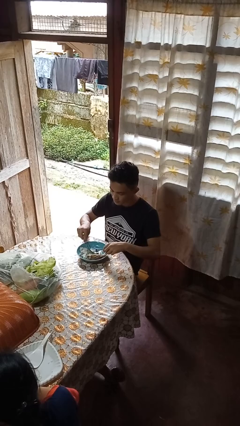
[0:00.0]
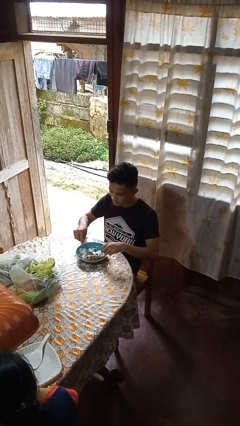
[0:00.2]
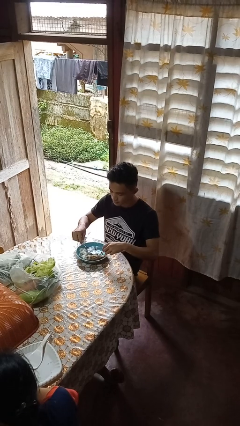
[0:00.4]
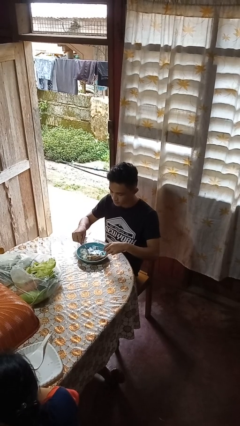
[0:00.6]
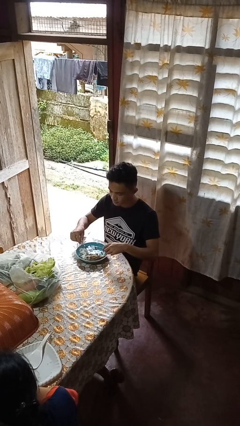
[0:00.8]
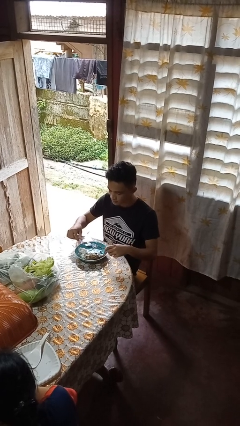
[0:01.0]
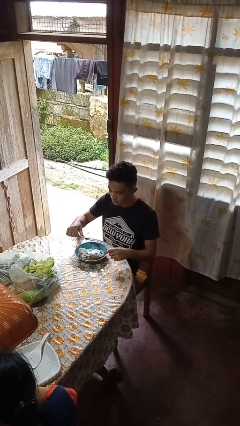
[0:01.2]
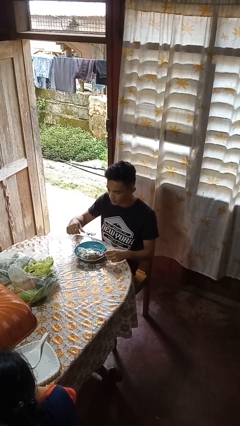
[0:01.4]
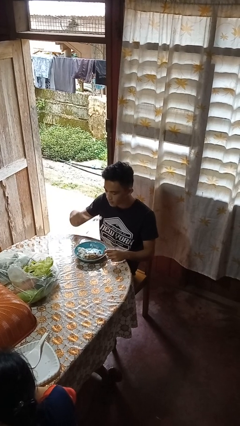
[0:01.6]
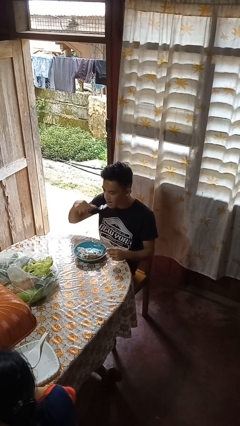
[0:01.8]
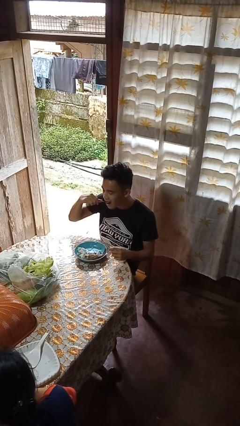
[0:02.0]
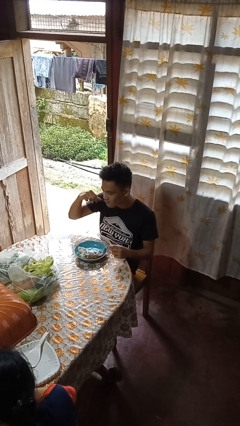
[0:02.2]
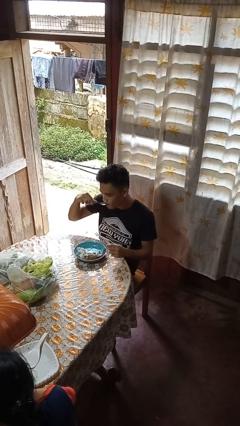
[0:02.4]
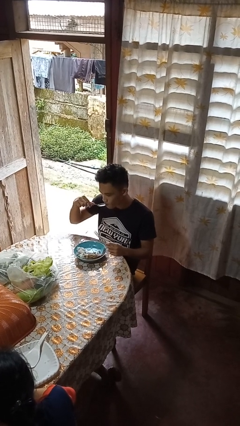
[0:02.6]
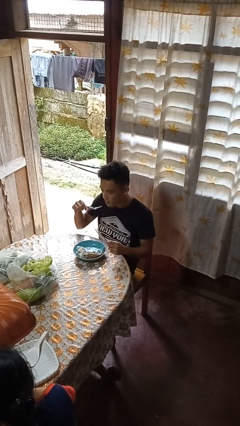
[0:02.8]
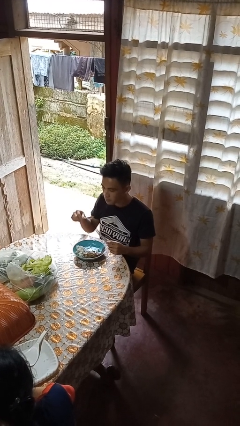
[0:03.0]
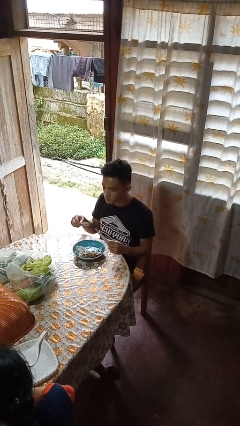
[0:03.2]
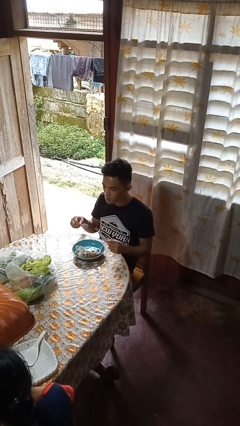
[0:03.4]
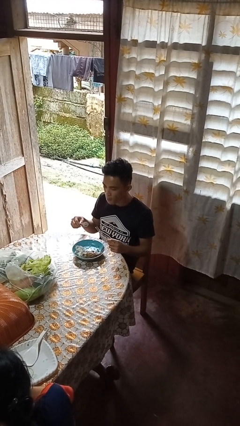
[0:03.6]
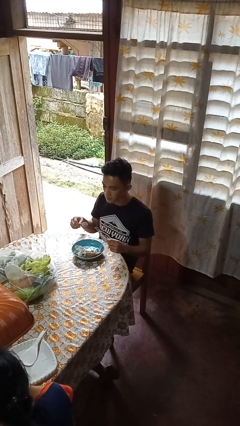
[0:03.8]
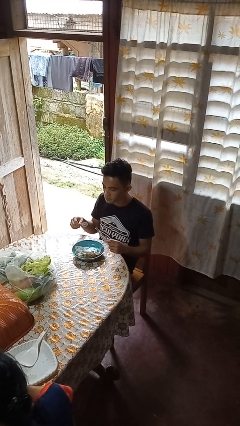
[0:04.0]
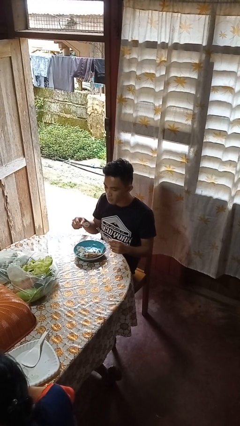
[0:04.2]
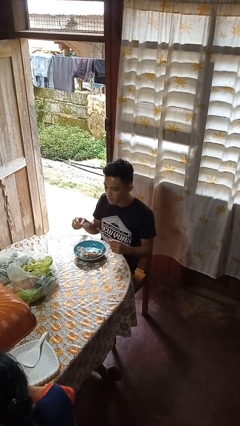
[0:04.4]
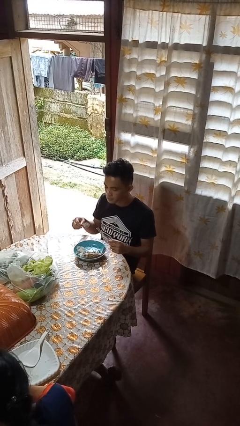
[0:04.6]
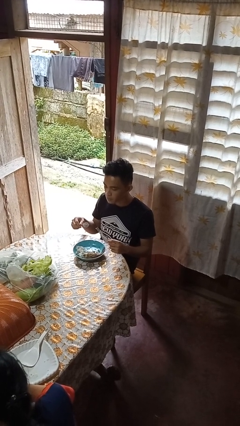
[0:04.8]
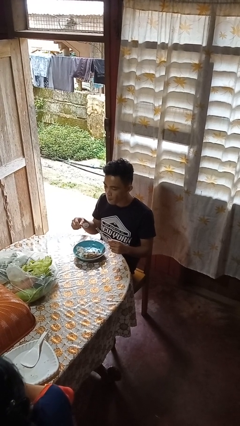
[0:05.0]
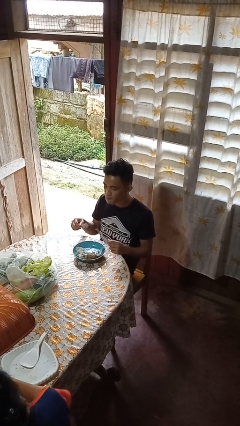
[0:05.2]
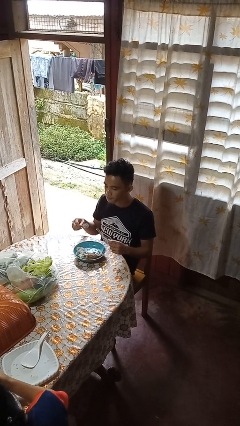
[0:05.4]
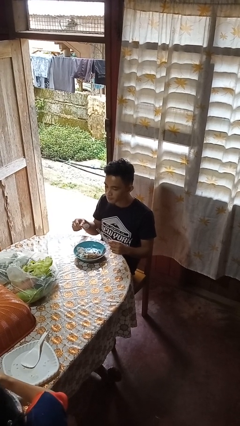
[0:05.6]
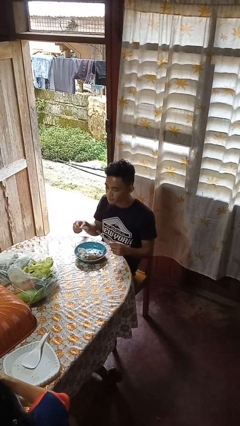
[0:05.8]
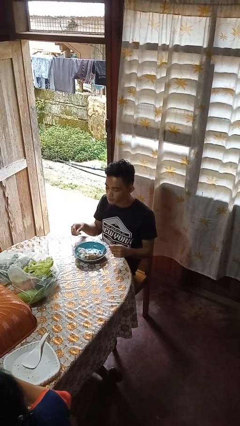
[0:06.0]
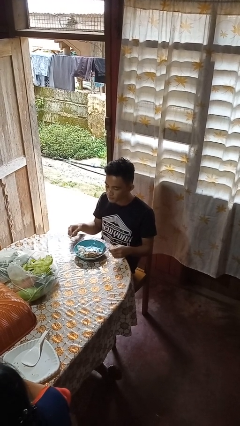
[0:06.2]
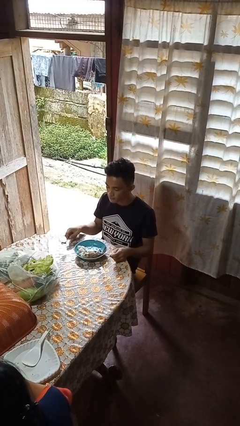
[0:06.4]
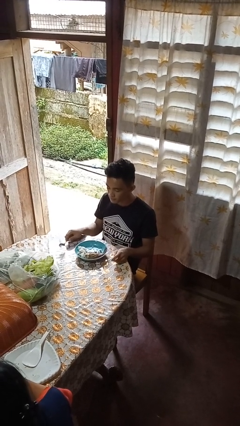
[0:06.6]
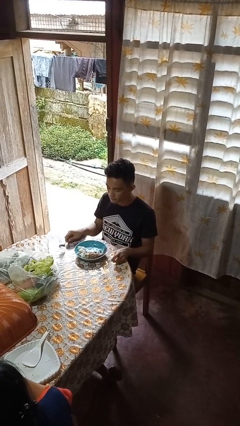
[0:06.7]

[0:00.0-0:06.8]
person eats with utensil

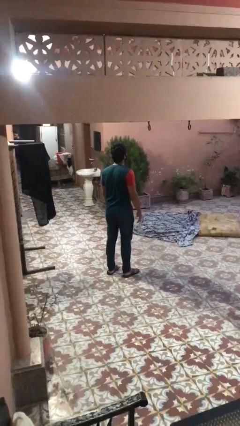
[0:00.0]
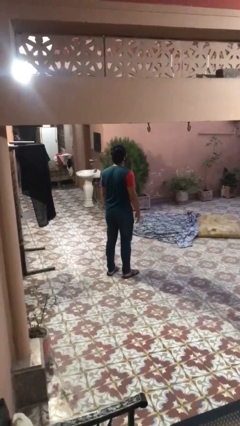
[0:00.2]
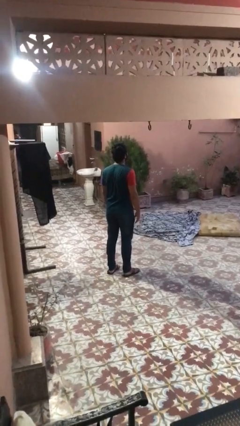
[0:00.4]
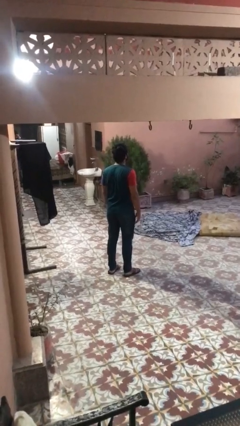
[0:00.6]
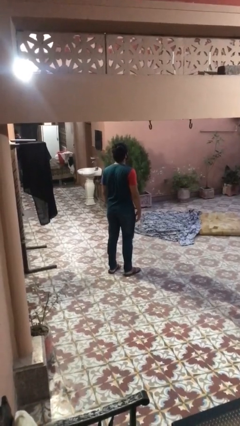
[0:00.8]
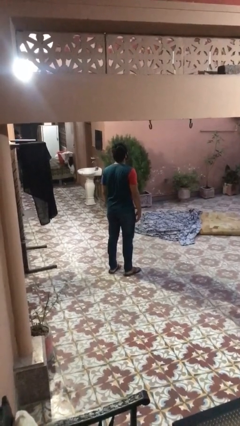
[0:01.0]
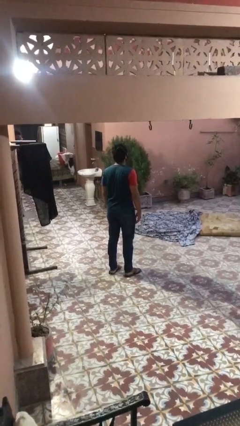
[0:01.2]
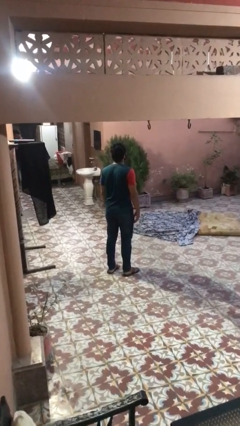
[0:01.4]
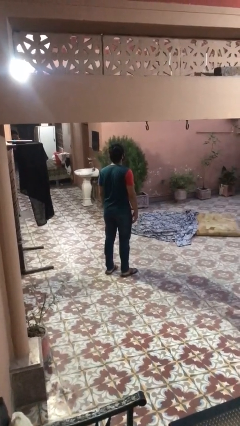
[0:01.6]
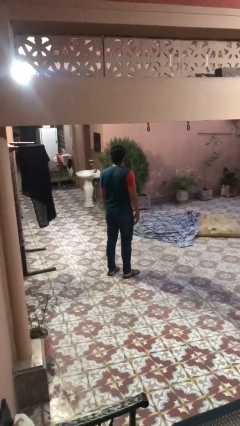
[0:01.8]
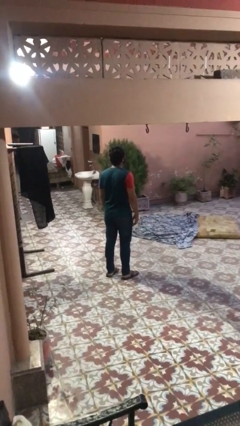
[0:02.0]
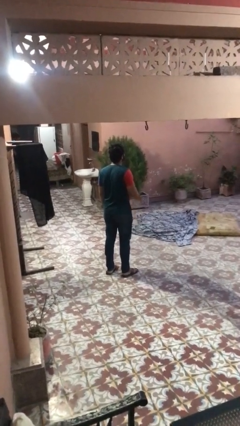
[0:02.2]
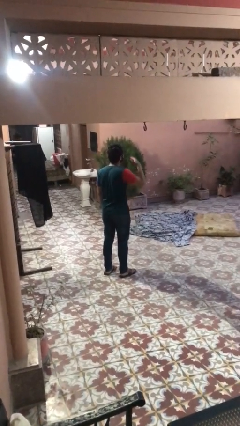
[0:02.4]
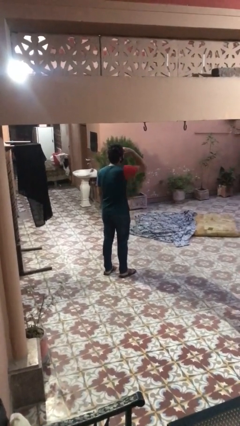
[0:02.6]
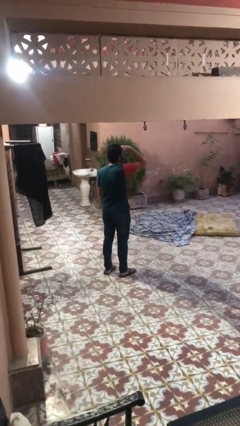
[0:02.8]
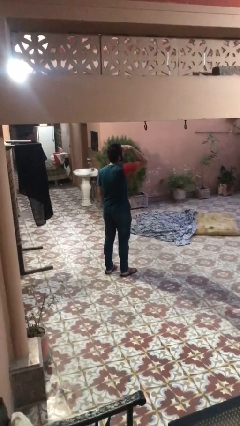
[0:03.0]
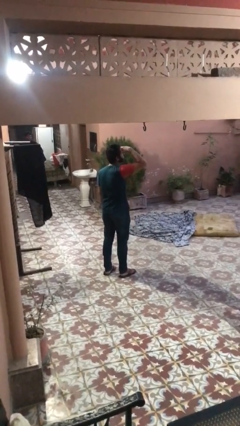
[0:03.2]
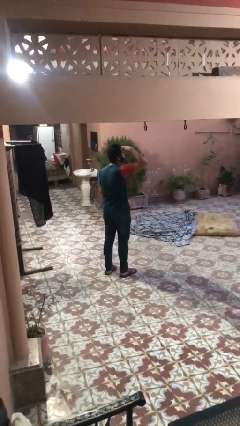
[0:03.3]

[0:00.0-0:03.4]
person shades eyes

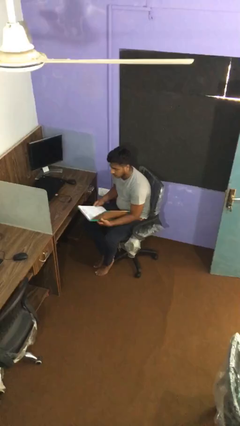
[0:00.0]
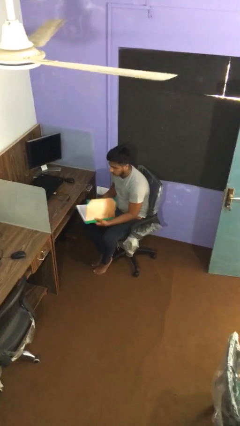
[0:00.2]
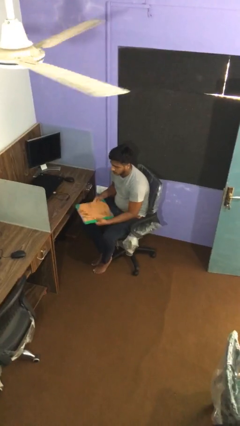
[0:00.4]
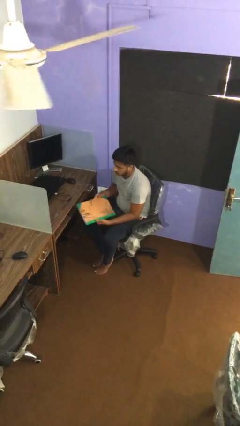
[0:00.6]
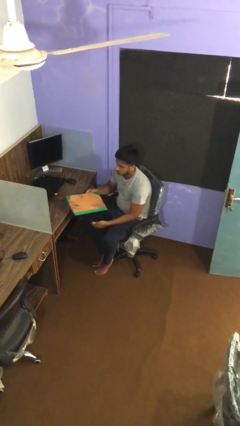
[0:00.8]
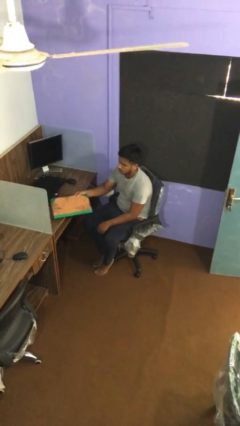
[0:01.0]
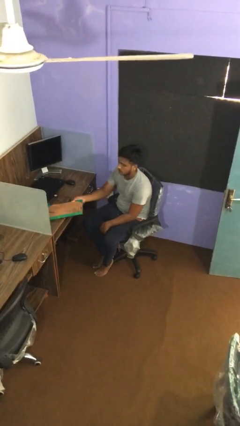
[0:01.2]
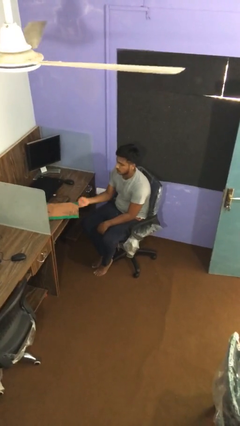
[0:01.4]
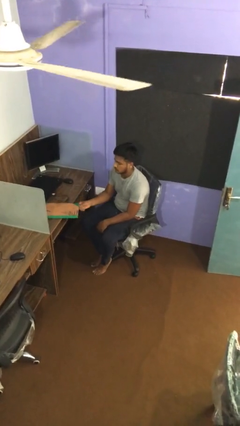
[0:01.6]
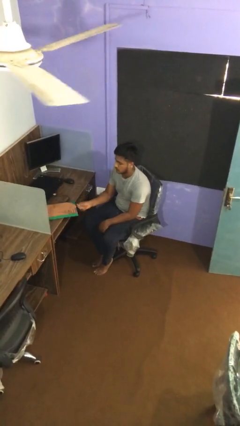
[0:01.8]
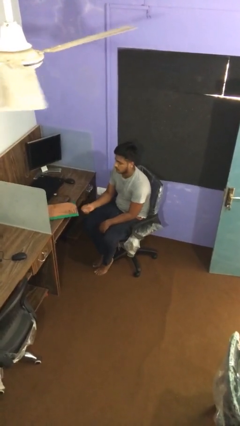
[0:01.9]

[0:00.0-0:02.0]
person puts down object on table

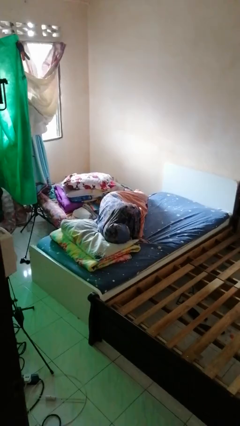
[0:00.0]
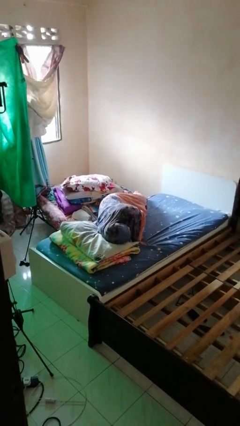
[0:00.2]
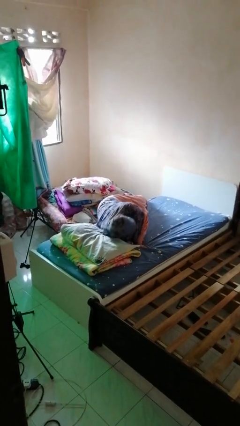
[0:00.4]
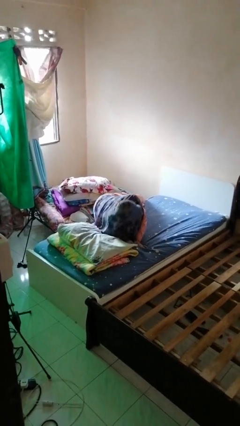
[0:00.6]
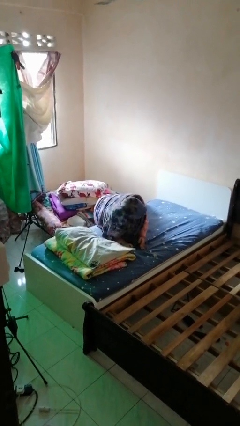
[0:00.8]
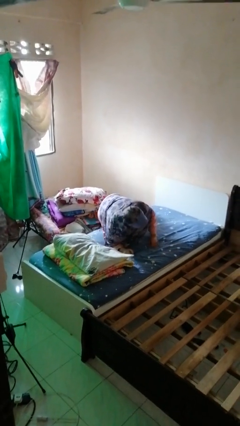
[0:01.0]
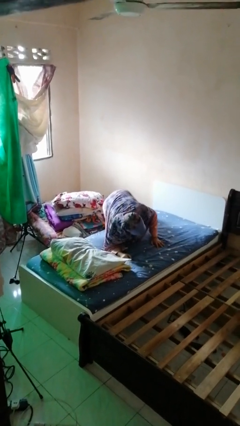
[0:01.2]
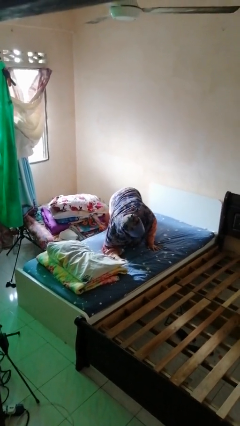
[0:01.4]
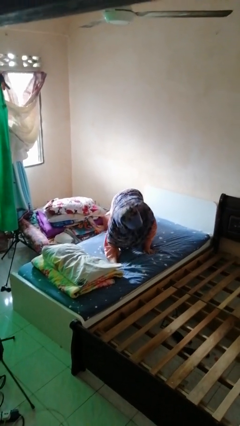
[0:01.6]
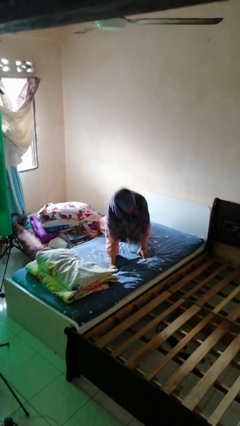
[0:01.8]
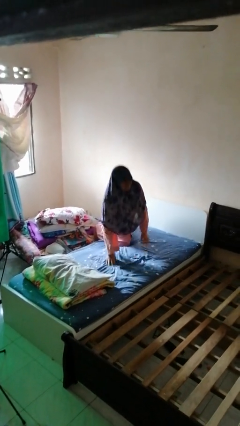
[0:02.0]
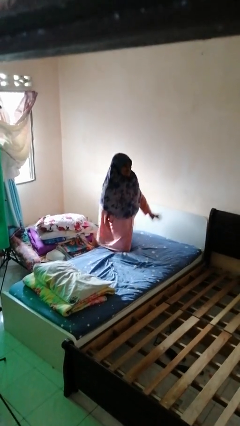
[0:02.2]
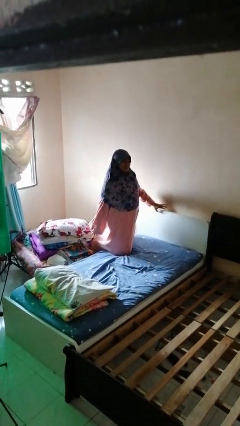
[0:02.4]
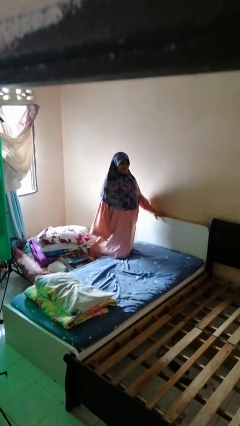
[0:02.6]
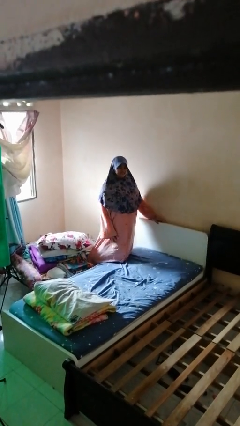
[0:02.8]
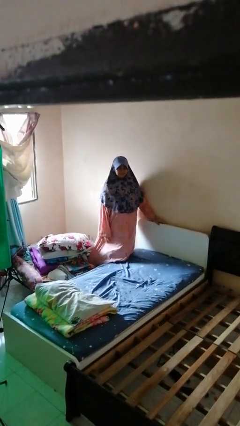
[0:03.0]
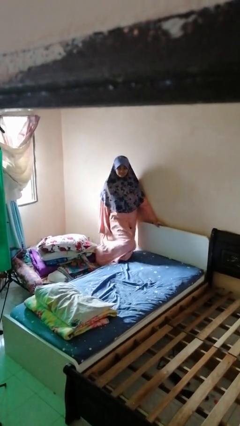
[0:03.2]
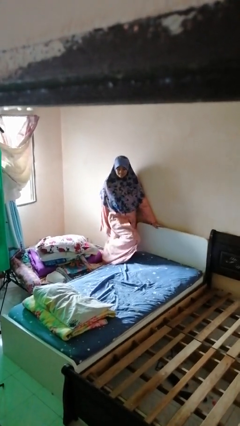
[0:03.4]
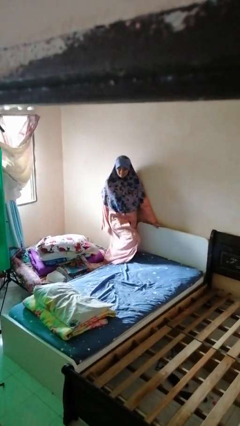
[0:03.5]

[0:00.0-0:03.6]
person stands up

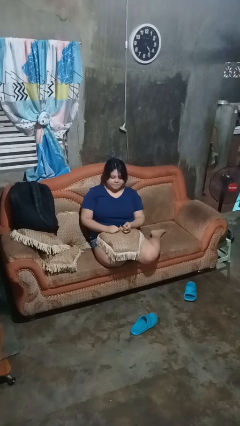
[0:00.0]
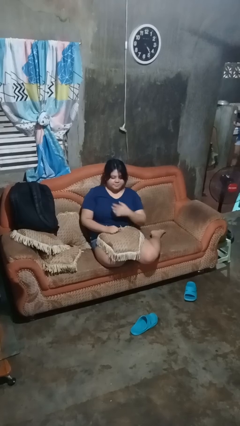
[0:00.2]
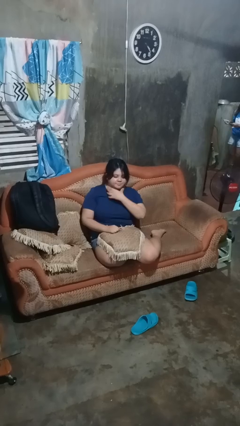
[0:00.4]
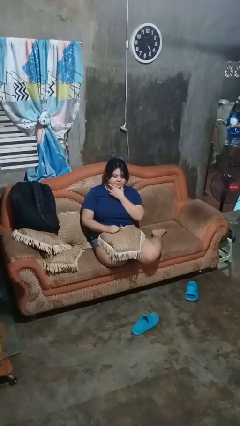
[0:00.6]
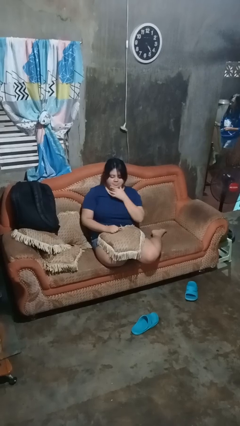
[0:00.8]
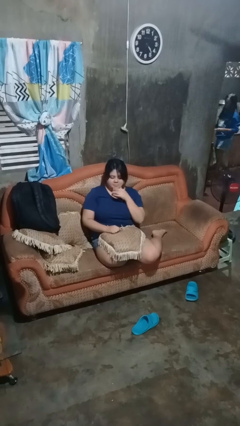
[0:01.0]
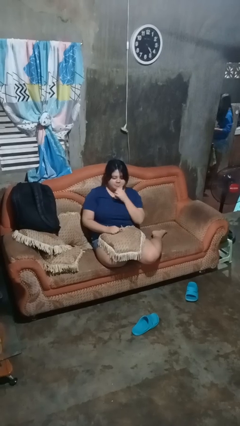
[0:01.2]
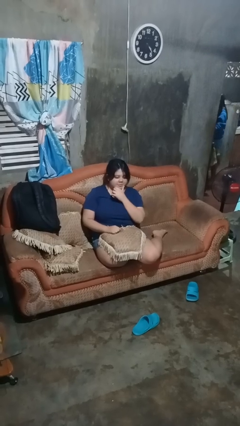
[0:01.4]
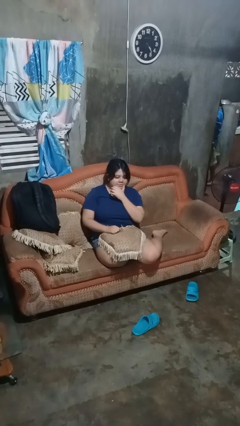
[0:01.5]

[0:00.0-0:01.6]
person strokes chin

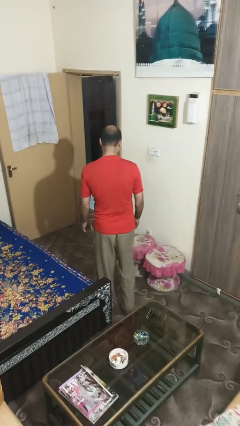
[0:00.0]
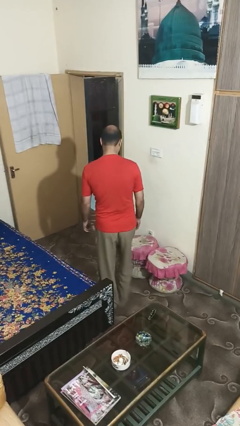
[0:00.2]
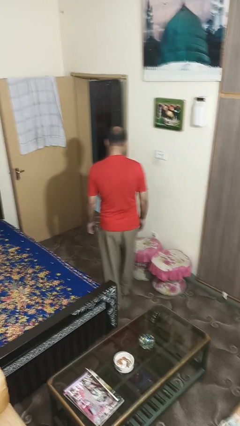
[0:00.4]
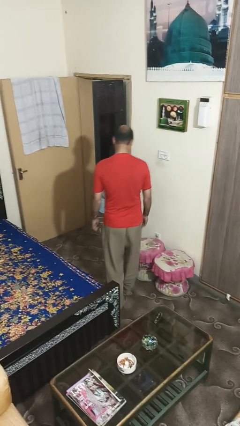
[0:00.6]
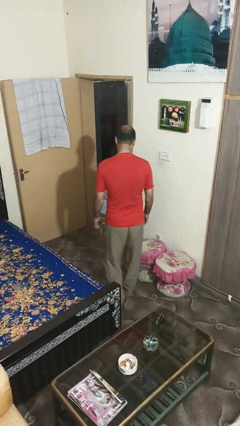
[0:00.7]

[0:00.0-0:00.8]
person bumps into wall
